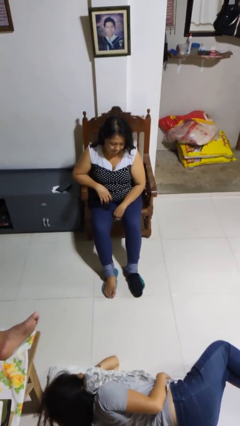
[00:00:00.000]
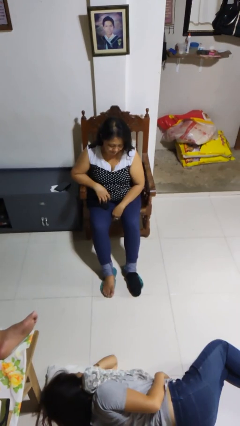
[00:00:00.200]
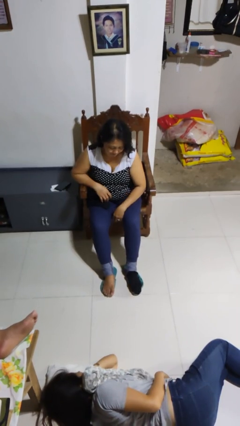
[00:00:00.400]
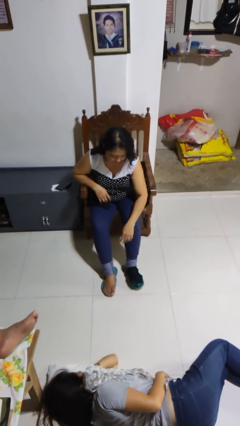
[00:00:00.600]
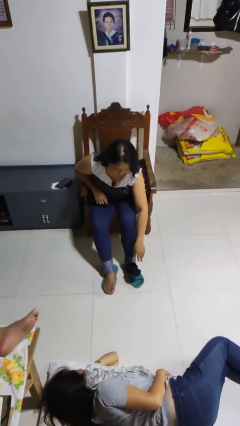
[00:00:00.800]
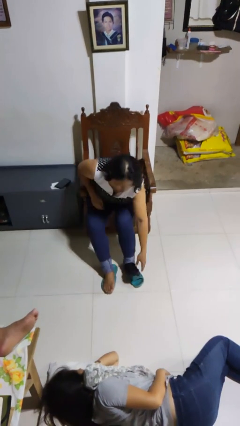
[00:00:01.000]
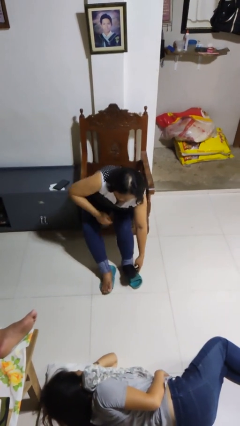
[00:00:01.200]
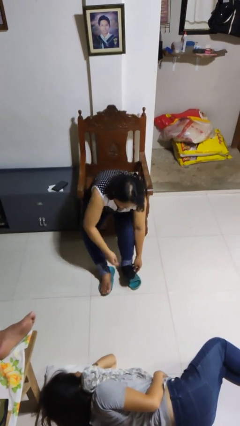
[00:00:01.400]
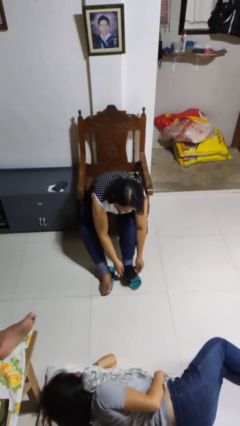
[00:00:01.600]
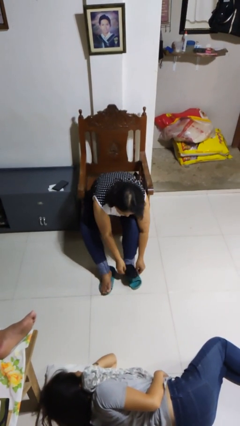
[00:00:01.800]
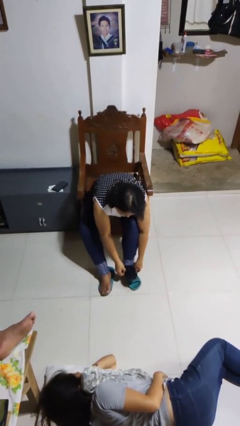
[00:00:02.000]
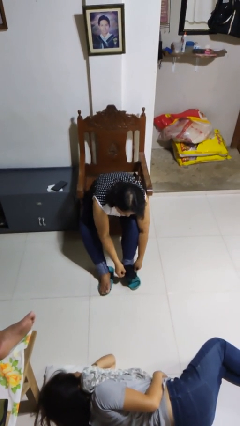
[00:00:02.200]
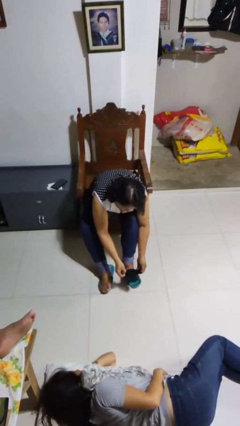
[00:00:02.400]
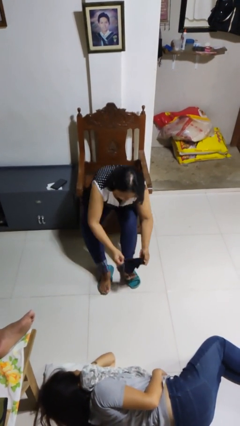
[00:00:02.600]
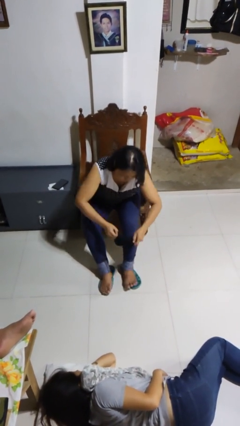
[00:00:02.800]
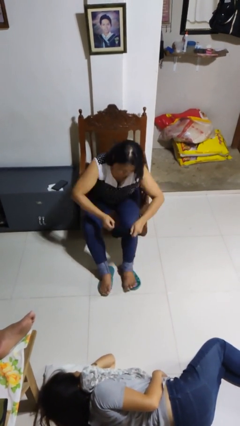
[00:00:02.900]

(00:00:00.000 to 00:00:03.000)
person takes off socks

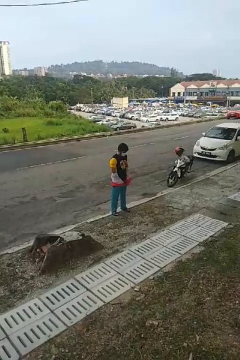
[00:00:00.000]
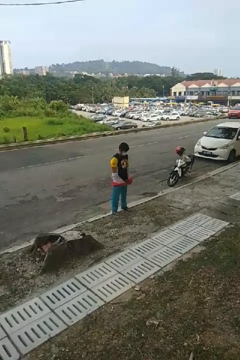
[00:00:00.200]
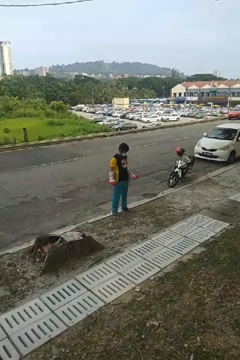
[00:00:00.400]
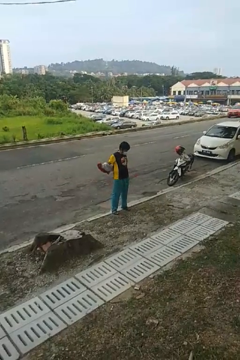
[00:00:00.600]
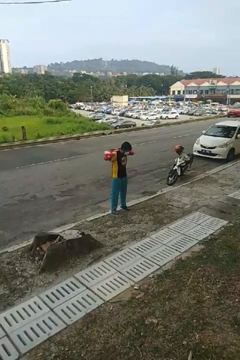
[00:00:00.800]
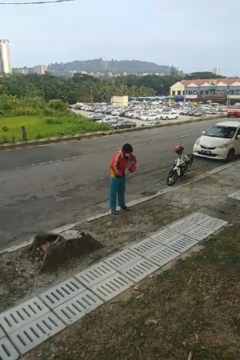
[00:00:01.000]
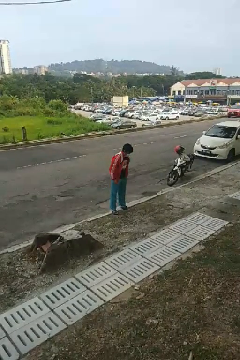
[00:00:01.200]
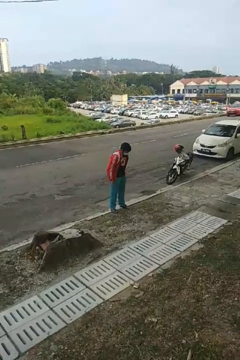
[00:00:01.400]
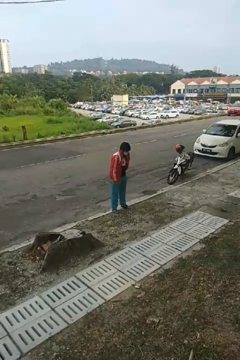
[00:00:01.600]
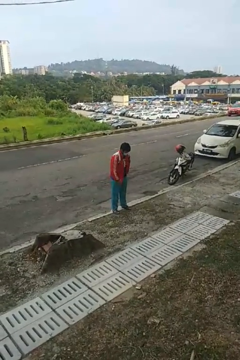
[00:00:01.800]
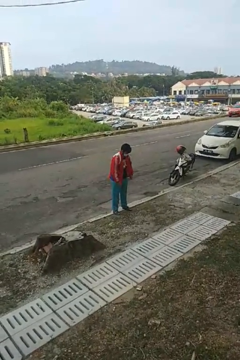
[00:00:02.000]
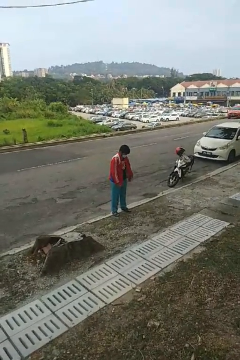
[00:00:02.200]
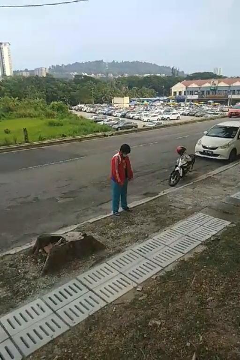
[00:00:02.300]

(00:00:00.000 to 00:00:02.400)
person puts on jacket

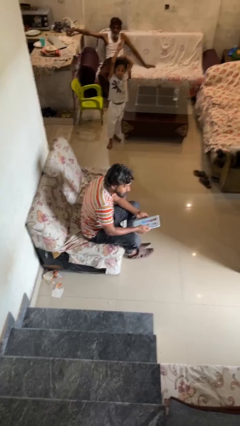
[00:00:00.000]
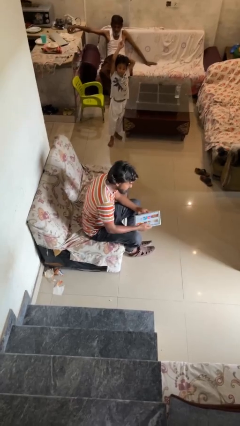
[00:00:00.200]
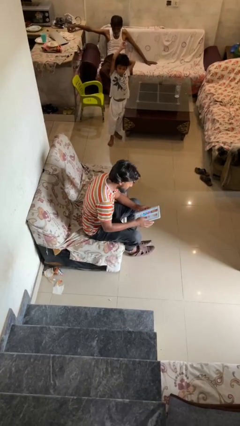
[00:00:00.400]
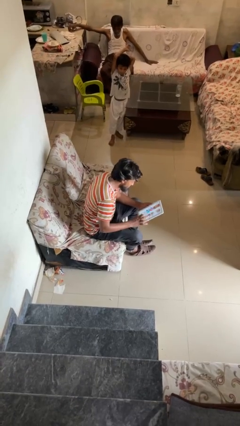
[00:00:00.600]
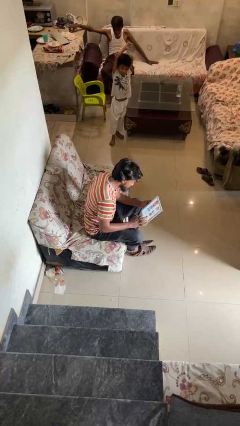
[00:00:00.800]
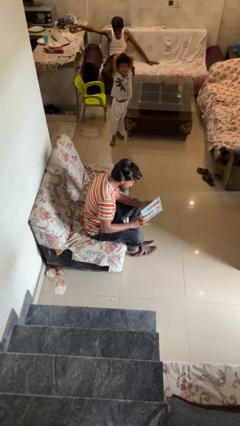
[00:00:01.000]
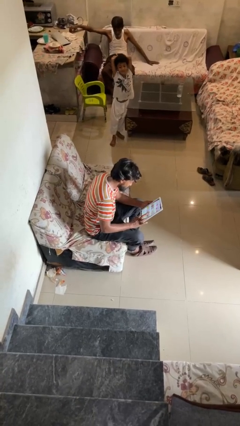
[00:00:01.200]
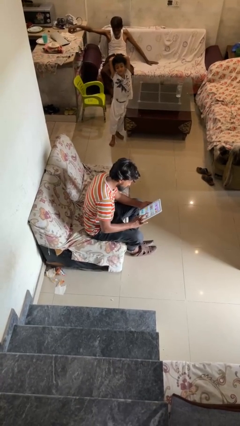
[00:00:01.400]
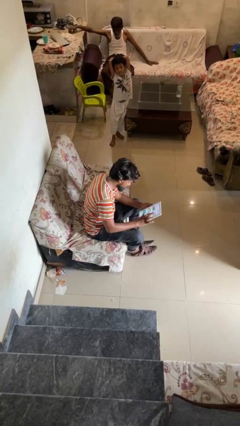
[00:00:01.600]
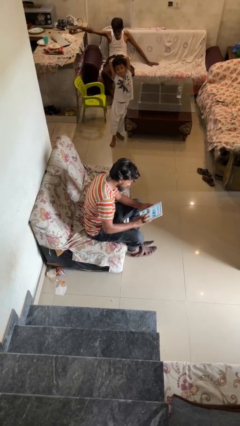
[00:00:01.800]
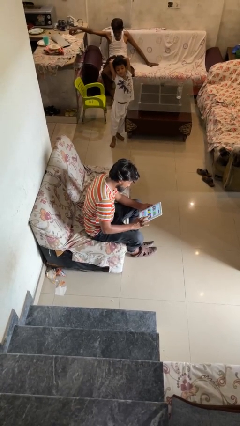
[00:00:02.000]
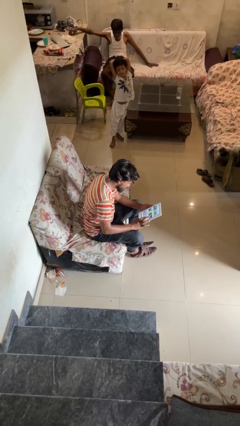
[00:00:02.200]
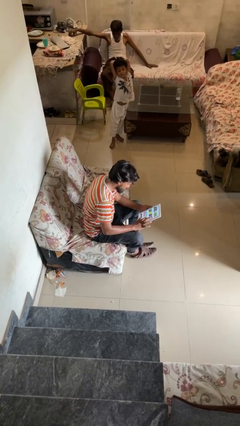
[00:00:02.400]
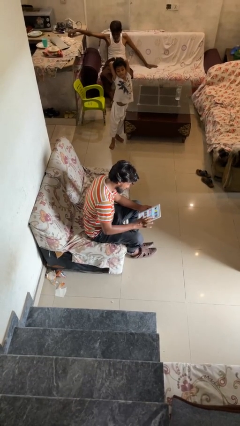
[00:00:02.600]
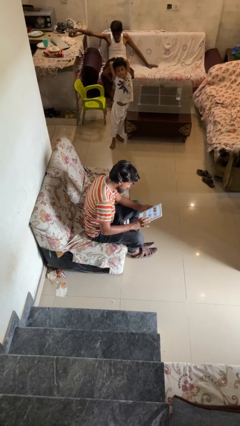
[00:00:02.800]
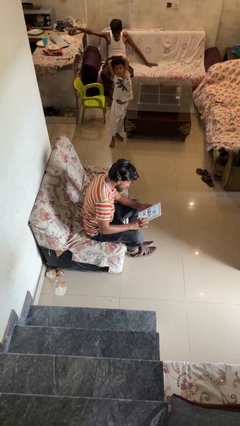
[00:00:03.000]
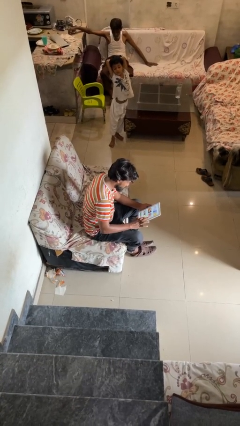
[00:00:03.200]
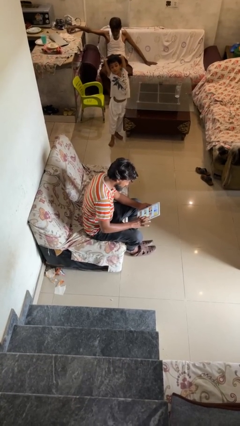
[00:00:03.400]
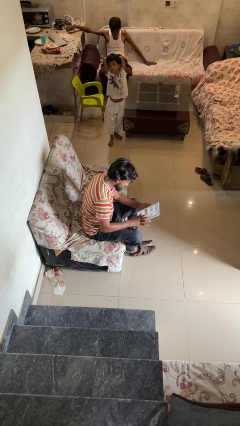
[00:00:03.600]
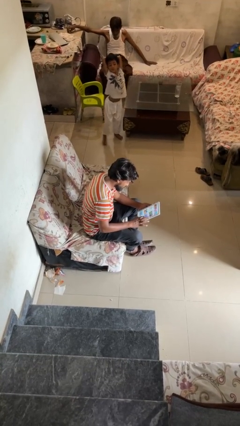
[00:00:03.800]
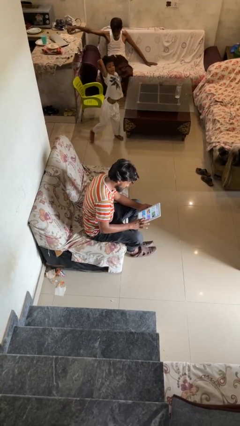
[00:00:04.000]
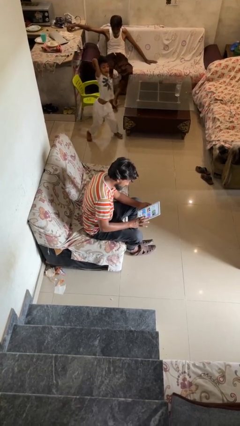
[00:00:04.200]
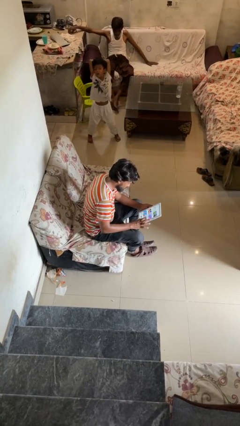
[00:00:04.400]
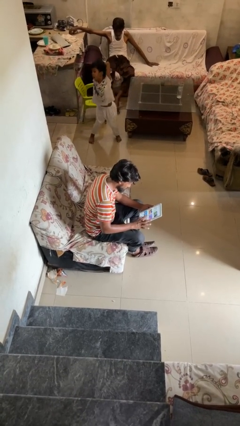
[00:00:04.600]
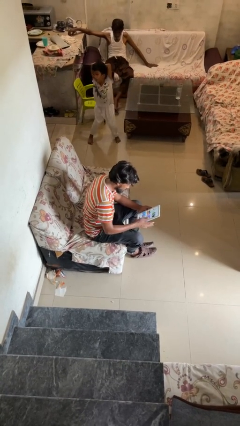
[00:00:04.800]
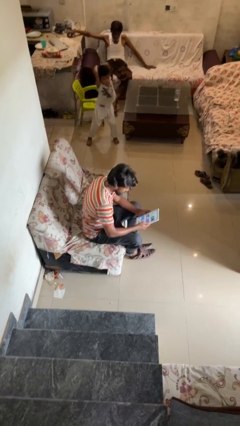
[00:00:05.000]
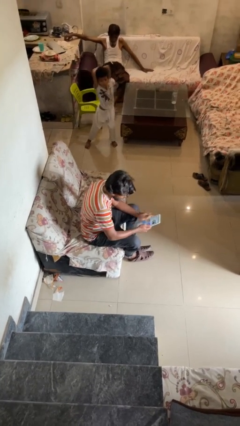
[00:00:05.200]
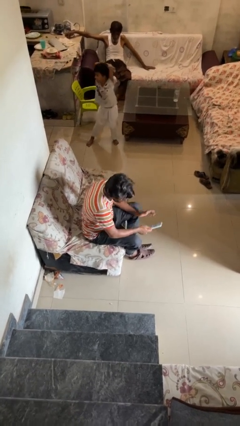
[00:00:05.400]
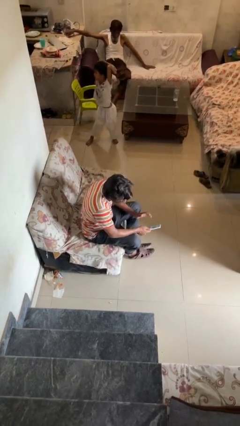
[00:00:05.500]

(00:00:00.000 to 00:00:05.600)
person interacts with tablet

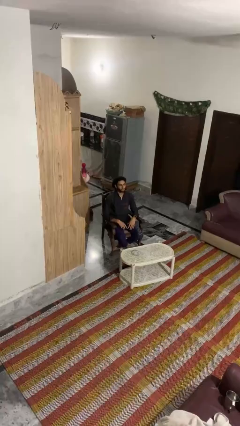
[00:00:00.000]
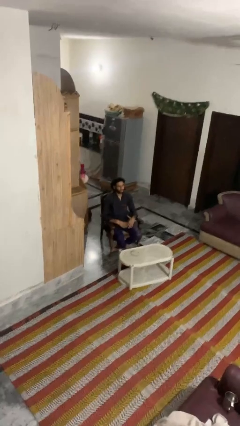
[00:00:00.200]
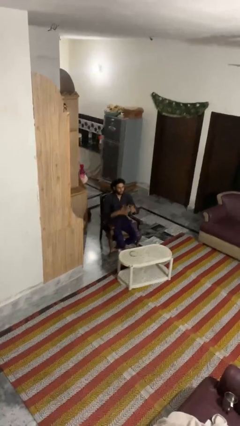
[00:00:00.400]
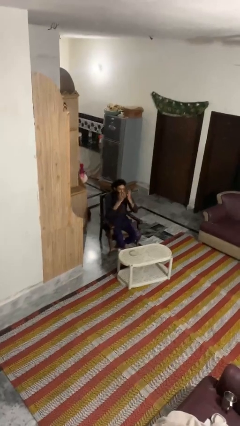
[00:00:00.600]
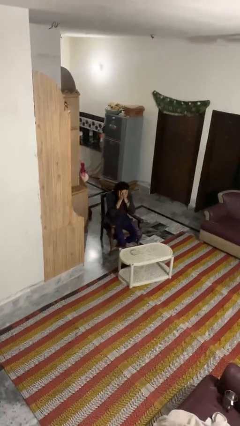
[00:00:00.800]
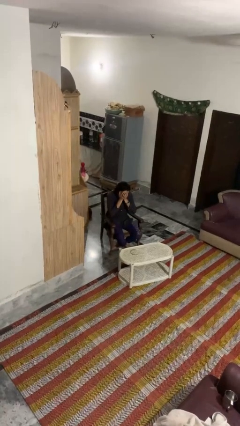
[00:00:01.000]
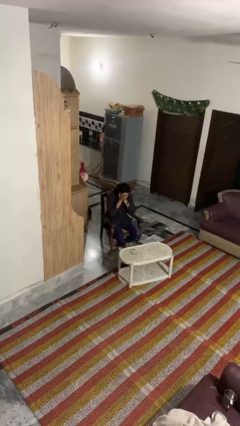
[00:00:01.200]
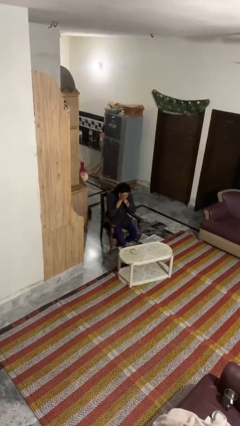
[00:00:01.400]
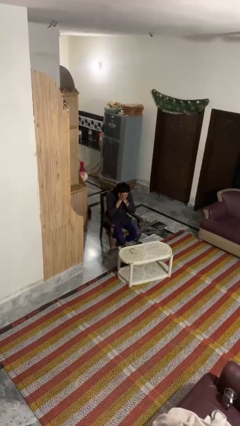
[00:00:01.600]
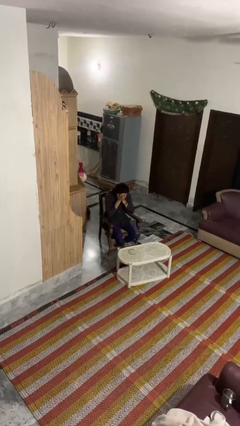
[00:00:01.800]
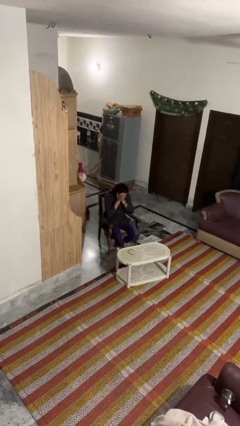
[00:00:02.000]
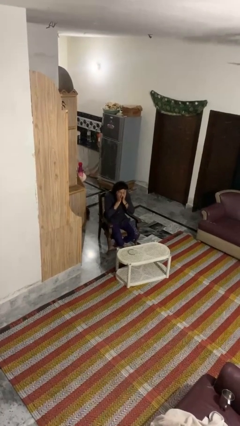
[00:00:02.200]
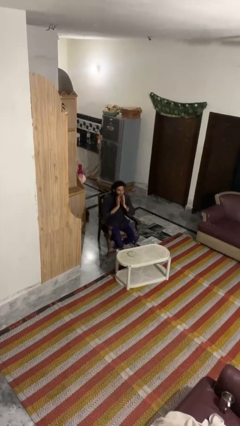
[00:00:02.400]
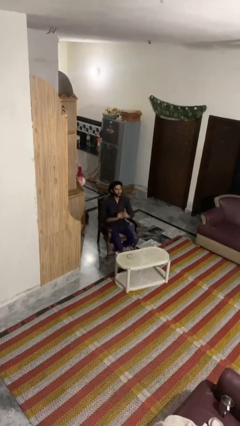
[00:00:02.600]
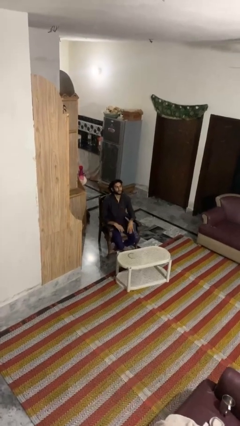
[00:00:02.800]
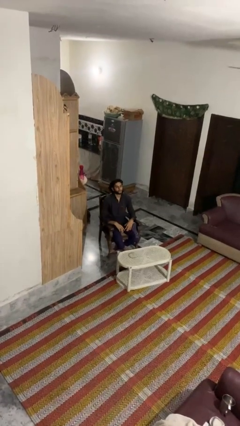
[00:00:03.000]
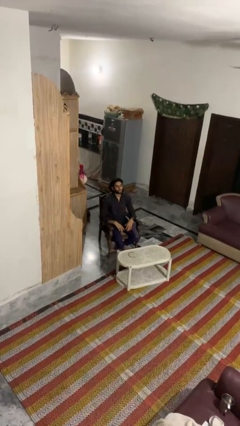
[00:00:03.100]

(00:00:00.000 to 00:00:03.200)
person covers face with hands

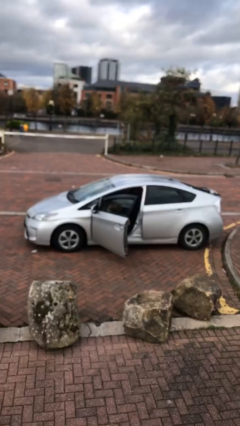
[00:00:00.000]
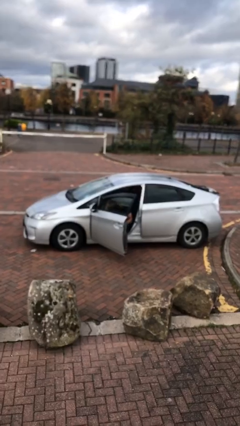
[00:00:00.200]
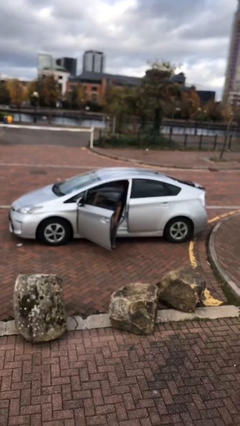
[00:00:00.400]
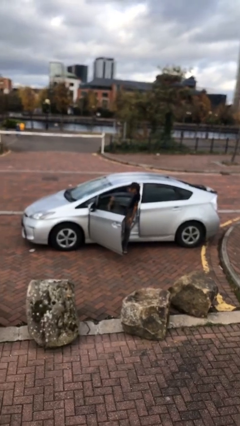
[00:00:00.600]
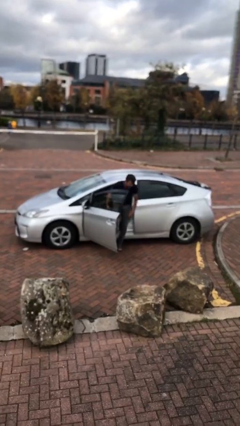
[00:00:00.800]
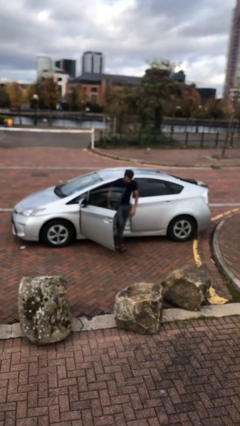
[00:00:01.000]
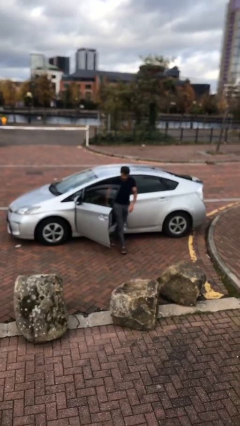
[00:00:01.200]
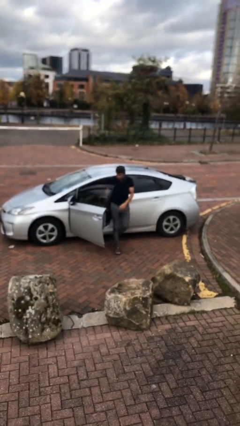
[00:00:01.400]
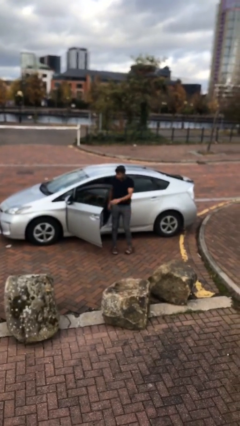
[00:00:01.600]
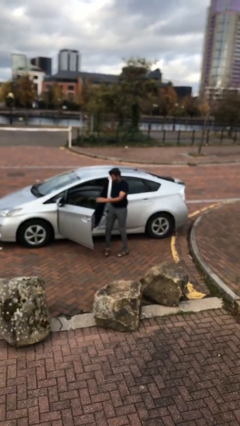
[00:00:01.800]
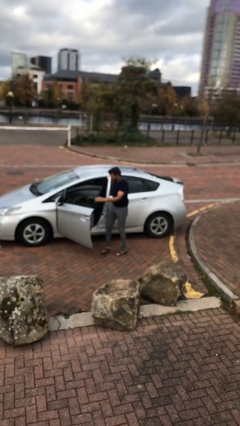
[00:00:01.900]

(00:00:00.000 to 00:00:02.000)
person exits car

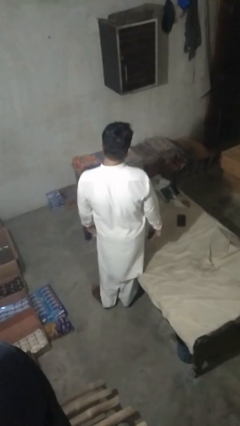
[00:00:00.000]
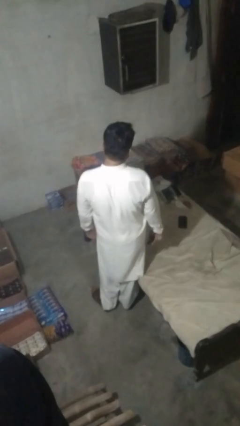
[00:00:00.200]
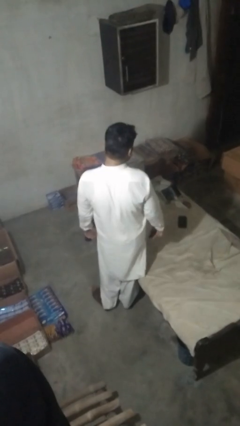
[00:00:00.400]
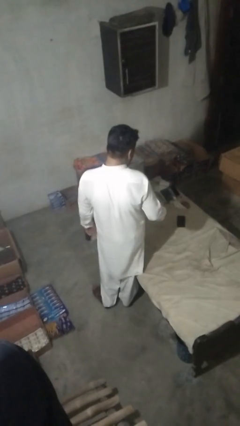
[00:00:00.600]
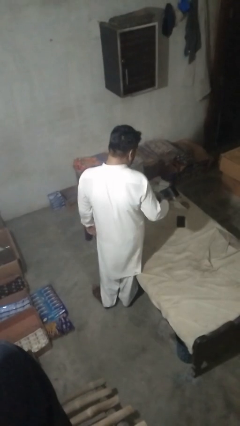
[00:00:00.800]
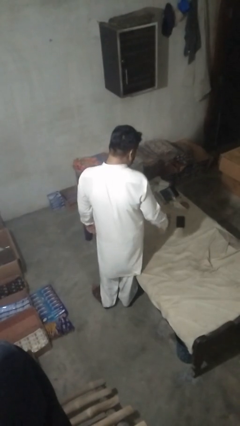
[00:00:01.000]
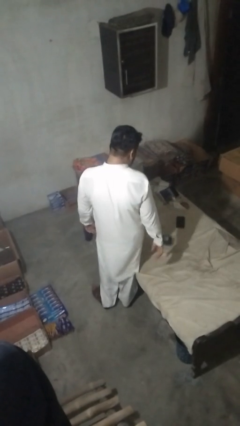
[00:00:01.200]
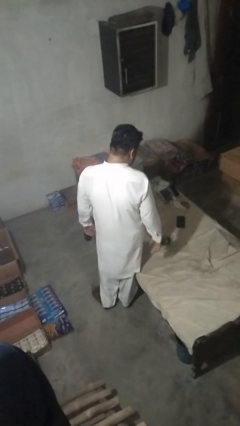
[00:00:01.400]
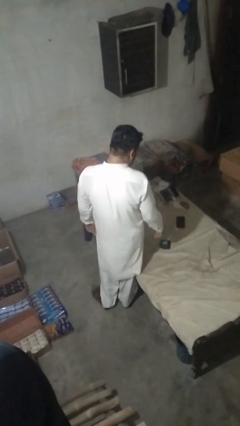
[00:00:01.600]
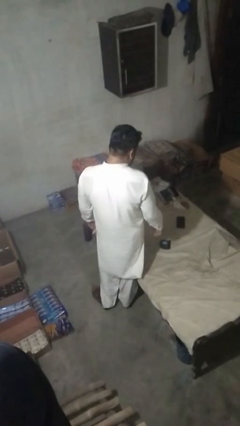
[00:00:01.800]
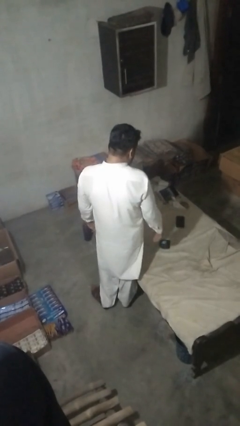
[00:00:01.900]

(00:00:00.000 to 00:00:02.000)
person throws object on bed
